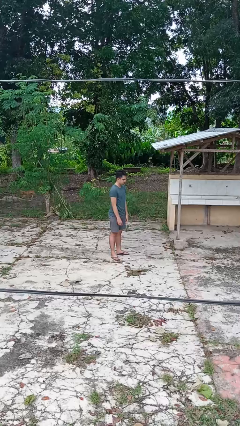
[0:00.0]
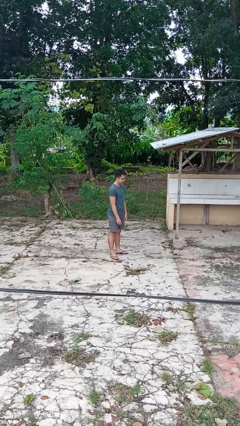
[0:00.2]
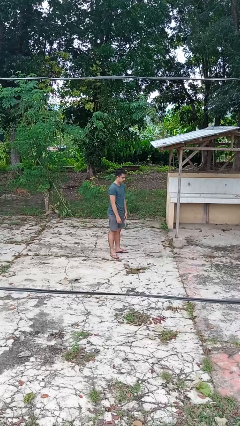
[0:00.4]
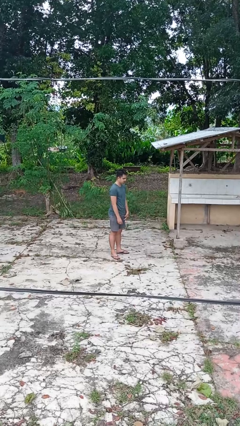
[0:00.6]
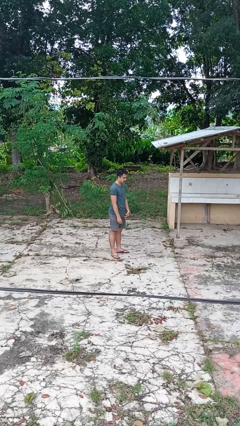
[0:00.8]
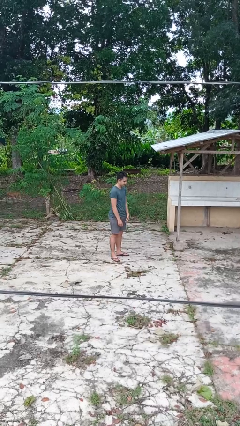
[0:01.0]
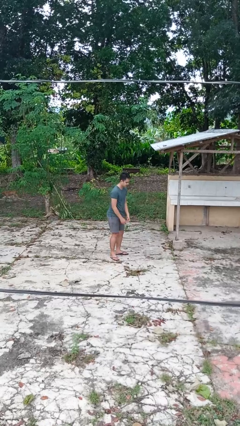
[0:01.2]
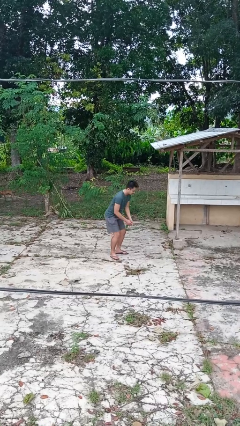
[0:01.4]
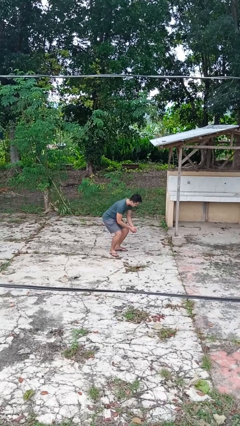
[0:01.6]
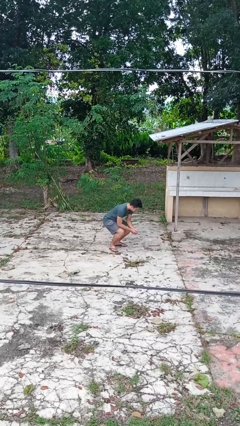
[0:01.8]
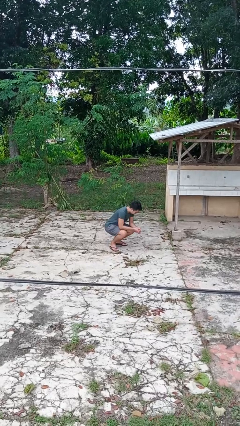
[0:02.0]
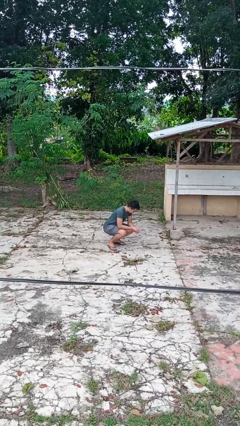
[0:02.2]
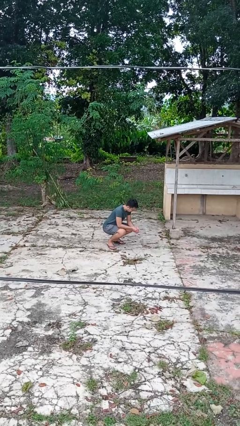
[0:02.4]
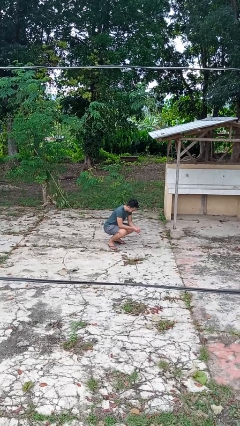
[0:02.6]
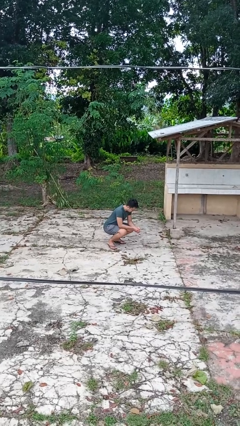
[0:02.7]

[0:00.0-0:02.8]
person squats

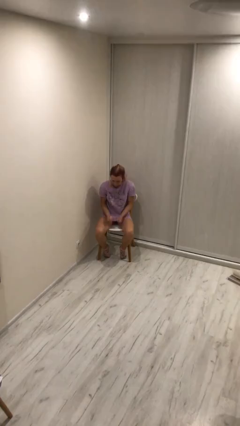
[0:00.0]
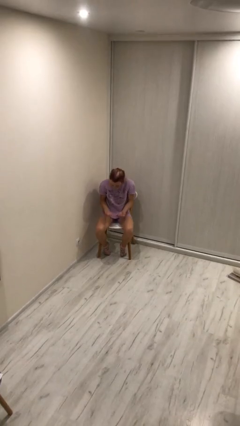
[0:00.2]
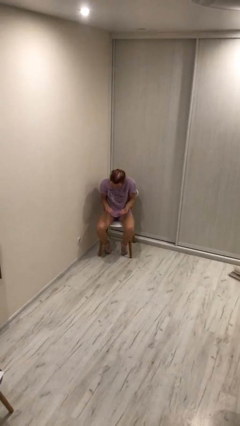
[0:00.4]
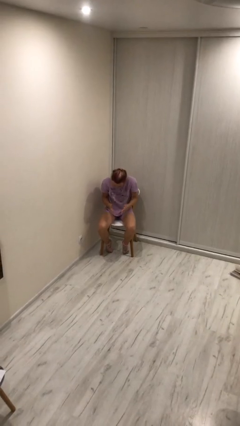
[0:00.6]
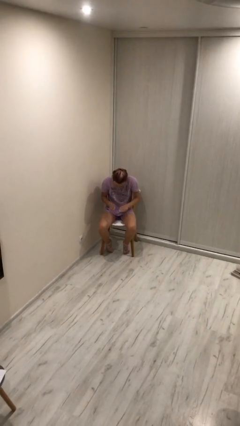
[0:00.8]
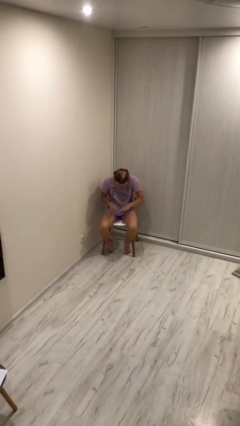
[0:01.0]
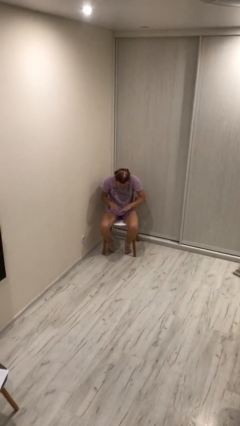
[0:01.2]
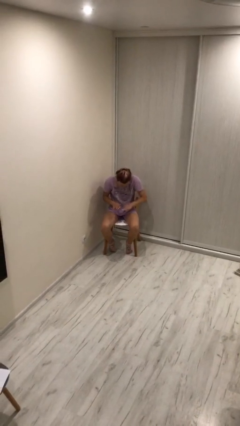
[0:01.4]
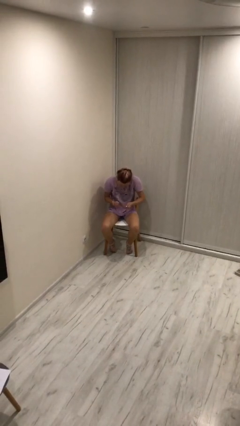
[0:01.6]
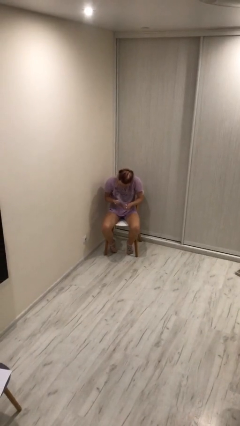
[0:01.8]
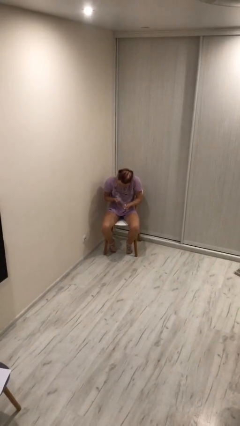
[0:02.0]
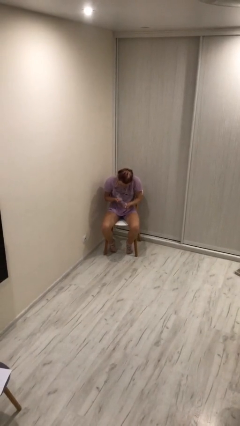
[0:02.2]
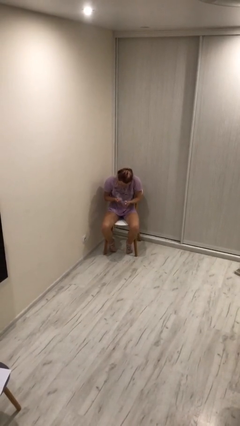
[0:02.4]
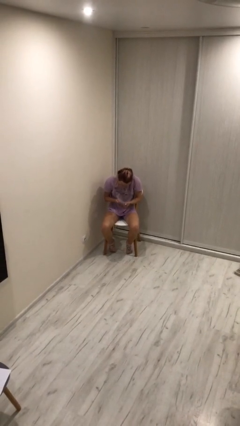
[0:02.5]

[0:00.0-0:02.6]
person looks at hands in lap

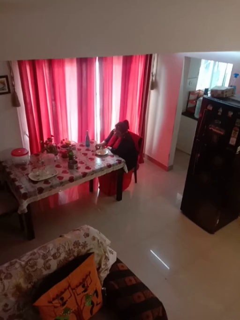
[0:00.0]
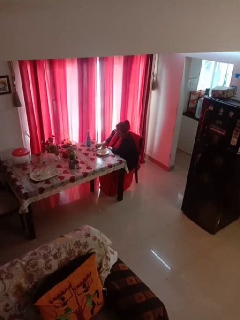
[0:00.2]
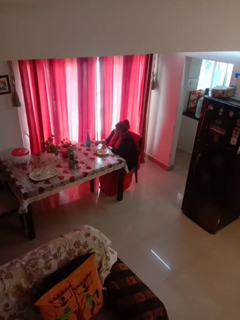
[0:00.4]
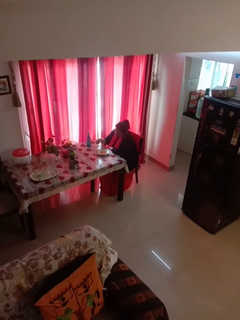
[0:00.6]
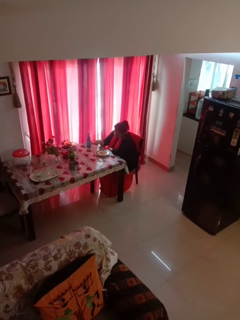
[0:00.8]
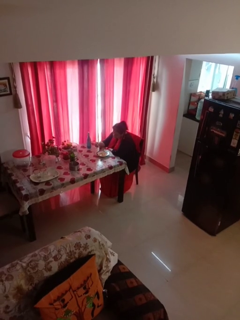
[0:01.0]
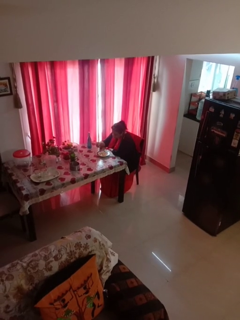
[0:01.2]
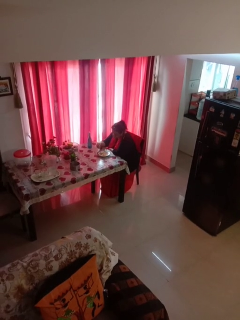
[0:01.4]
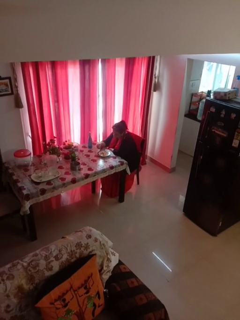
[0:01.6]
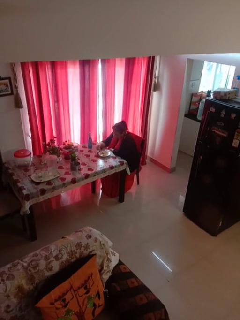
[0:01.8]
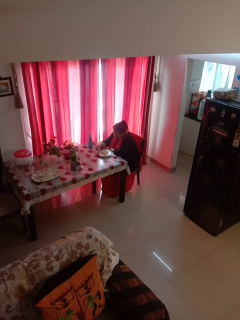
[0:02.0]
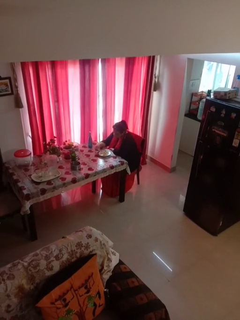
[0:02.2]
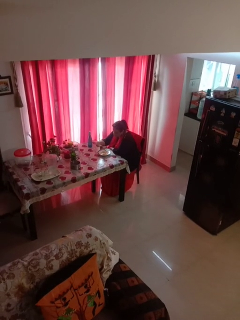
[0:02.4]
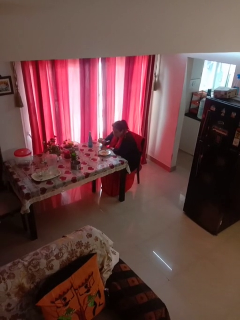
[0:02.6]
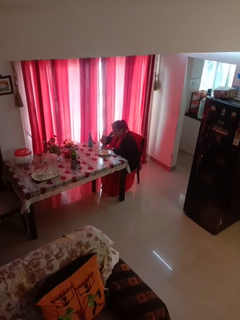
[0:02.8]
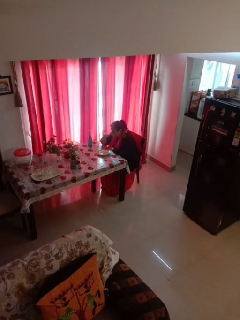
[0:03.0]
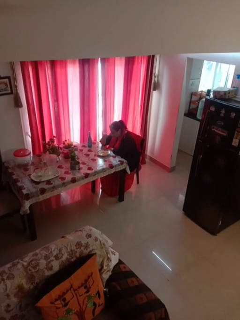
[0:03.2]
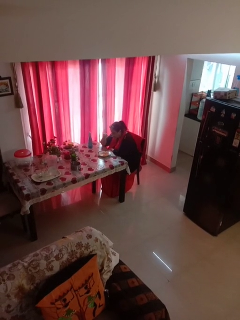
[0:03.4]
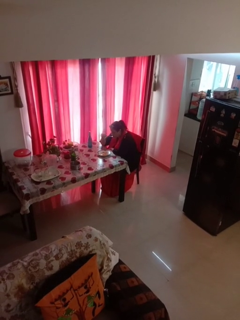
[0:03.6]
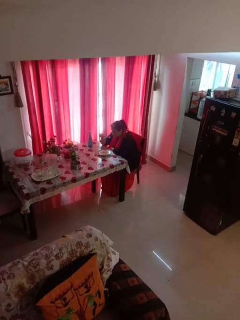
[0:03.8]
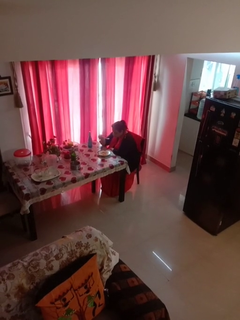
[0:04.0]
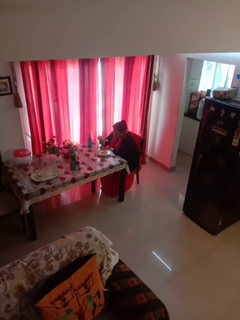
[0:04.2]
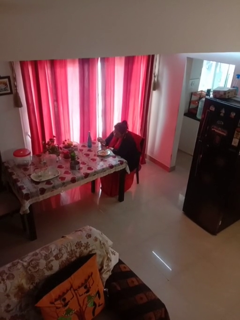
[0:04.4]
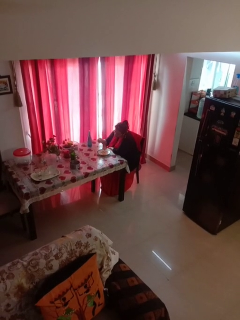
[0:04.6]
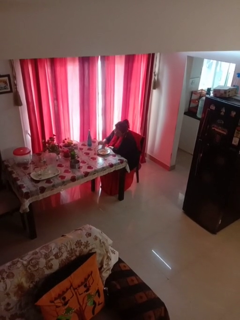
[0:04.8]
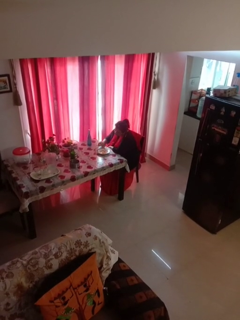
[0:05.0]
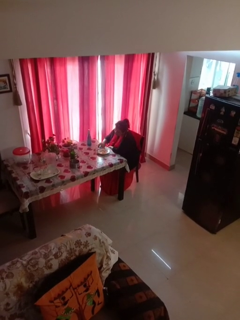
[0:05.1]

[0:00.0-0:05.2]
person eats with utensil

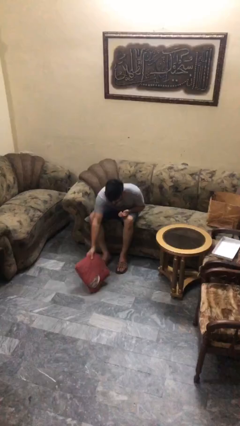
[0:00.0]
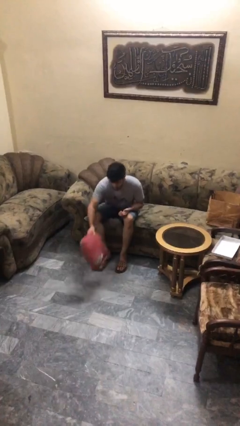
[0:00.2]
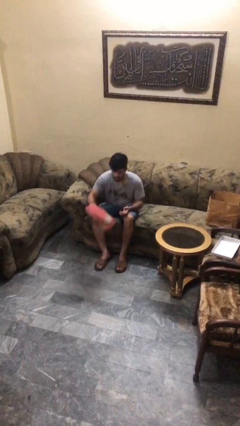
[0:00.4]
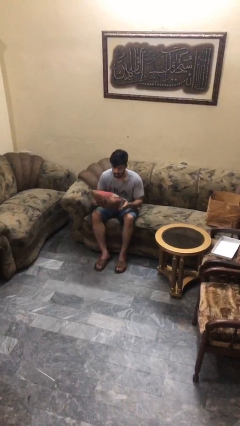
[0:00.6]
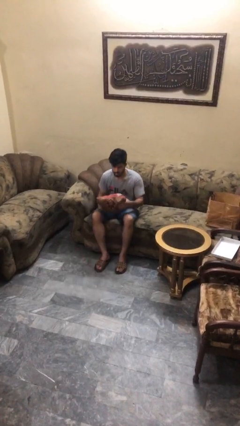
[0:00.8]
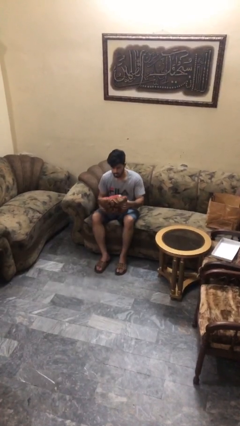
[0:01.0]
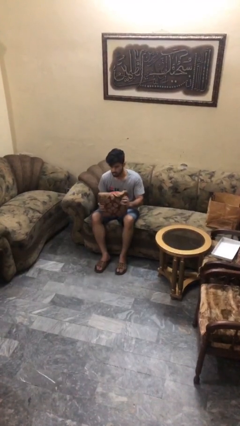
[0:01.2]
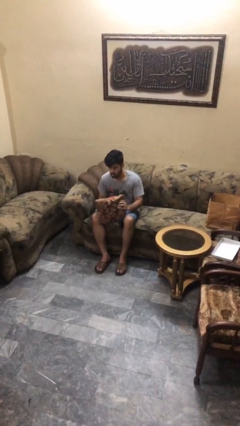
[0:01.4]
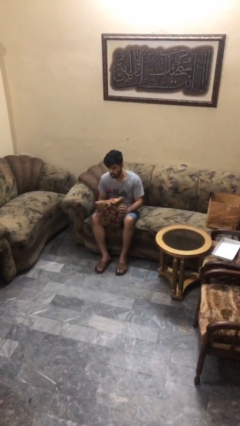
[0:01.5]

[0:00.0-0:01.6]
person picks up object from floor

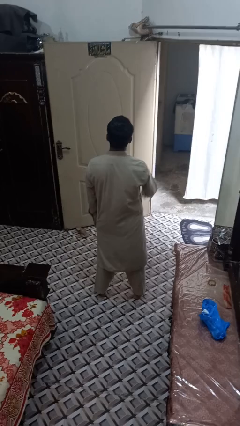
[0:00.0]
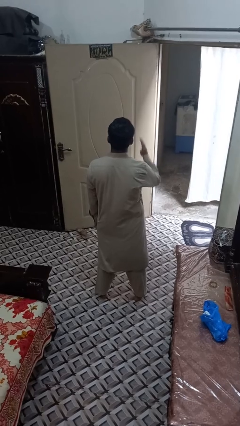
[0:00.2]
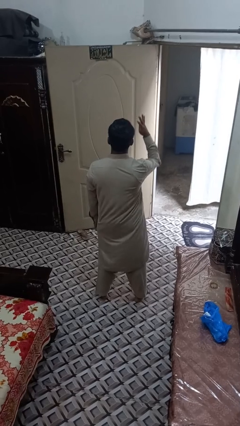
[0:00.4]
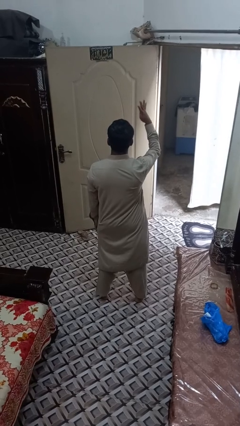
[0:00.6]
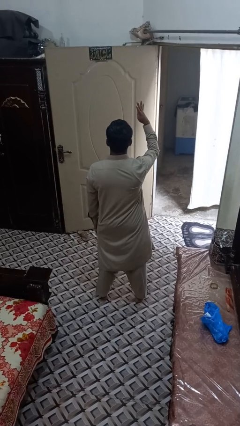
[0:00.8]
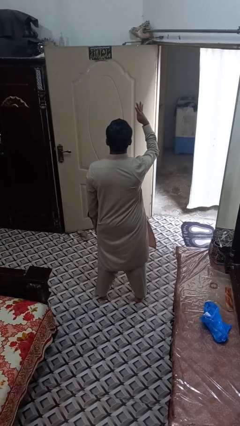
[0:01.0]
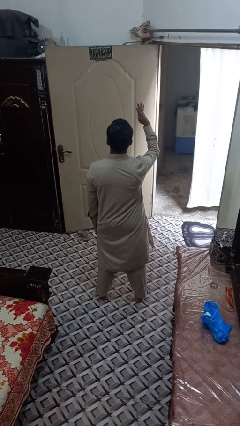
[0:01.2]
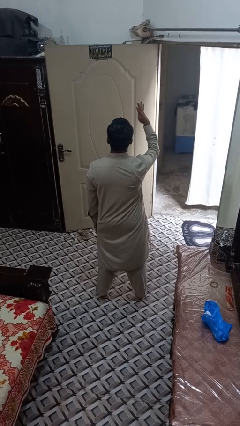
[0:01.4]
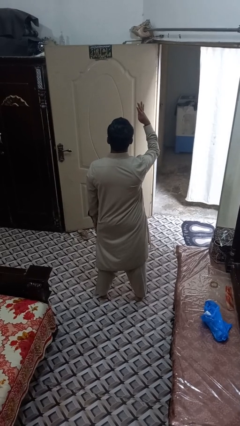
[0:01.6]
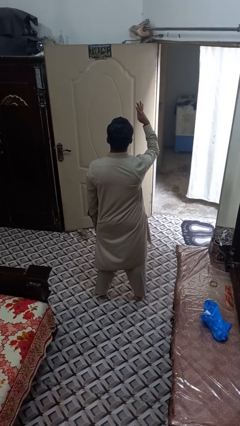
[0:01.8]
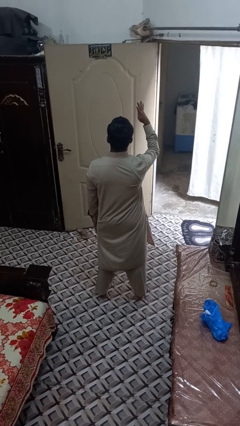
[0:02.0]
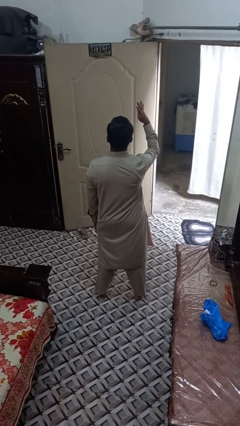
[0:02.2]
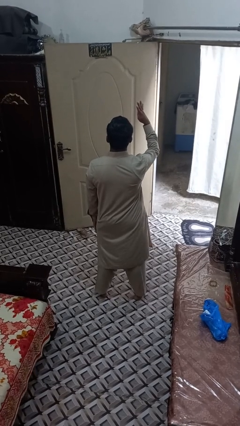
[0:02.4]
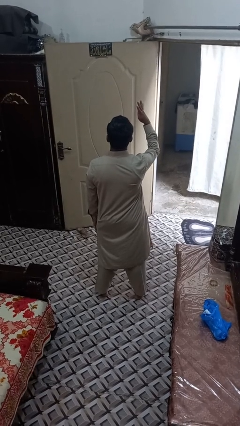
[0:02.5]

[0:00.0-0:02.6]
person gestures number four

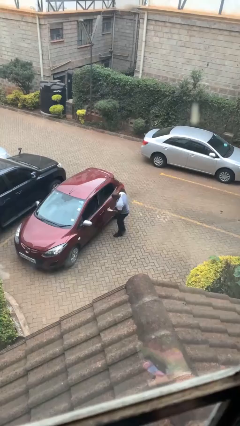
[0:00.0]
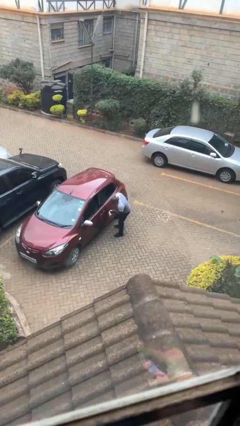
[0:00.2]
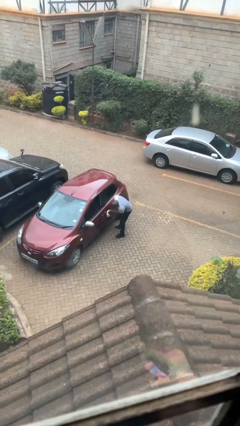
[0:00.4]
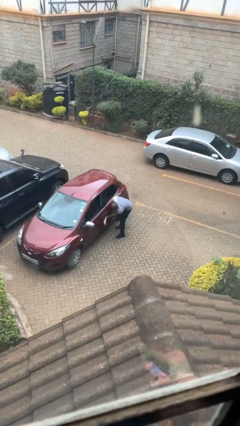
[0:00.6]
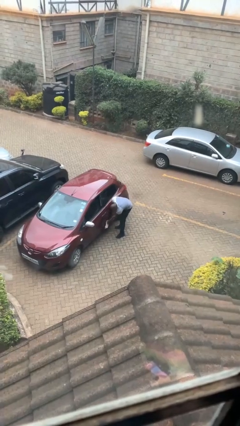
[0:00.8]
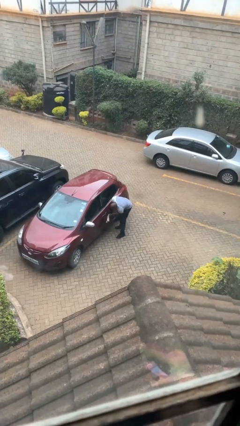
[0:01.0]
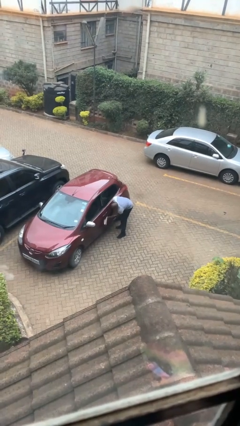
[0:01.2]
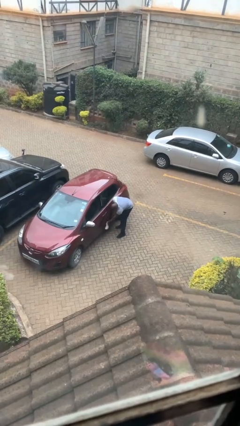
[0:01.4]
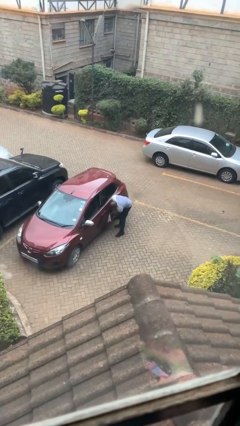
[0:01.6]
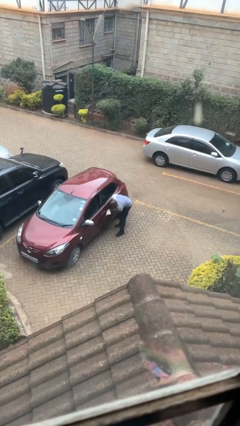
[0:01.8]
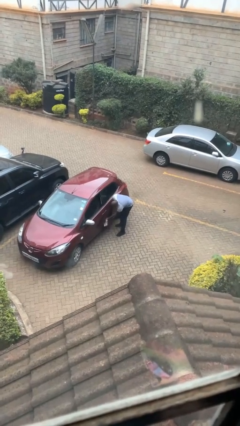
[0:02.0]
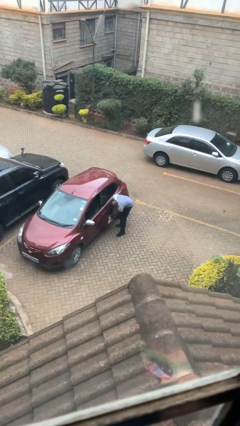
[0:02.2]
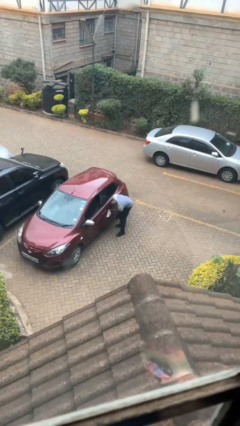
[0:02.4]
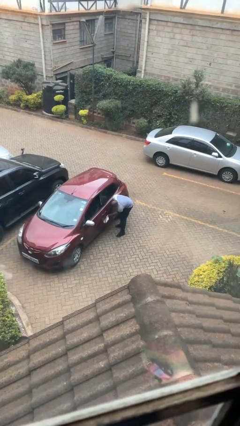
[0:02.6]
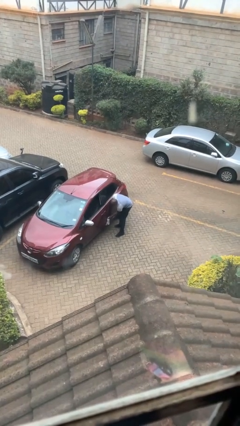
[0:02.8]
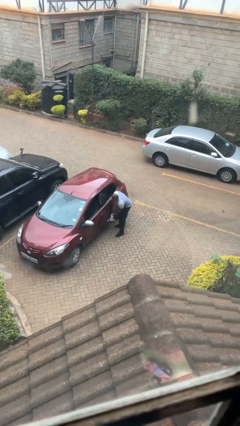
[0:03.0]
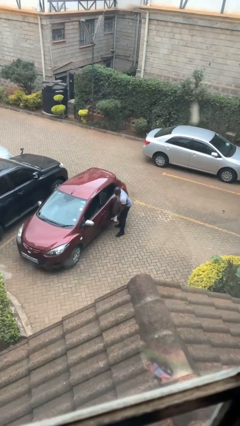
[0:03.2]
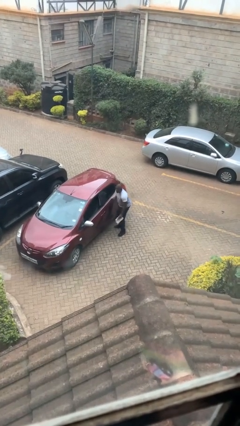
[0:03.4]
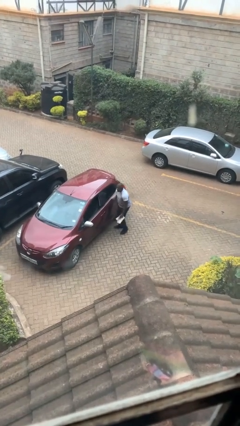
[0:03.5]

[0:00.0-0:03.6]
person polishes car with rag

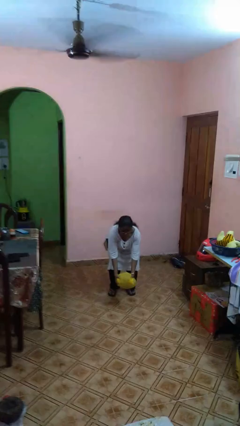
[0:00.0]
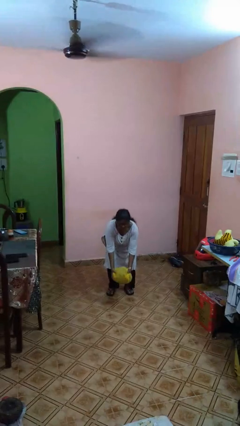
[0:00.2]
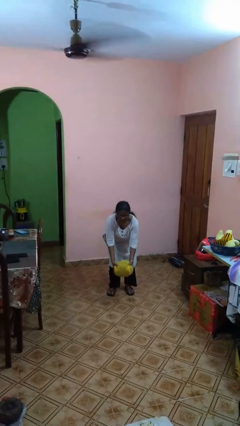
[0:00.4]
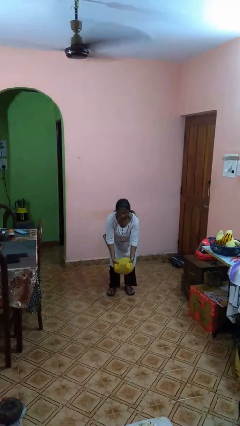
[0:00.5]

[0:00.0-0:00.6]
person catches dropped object
